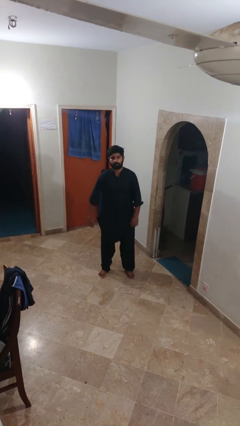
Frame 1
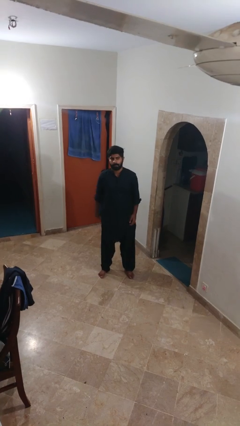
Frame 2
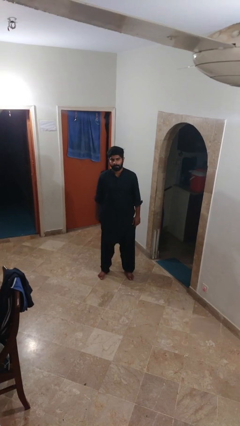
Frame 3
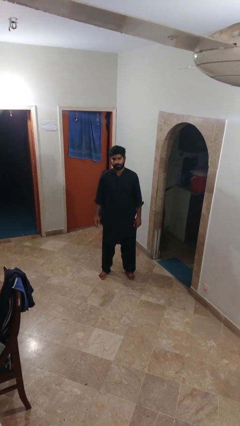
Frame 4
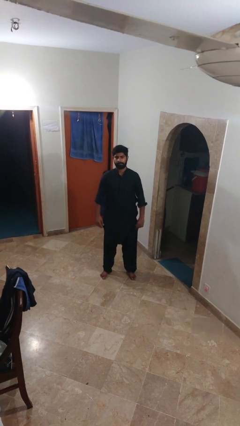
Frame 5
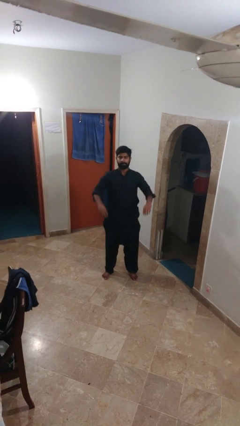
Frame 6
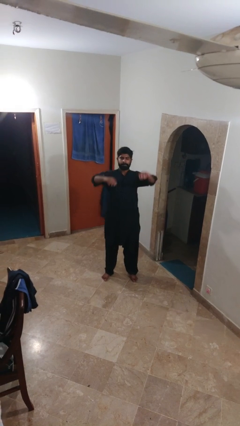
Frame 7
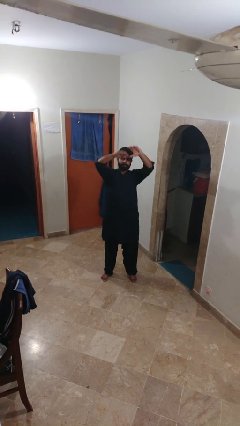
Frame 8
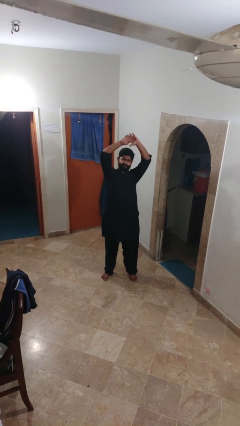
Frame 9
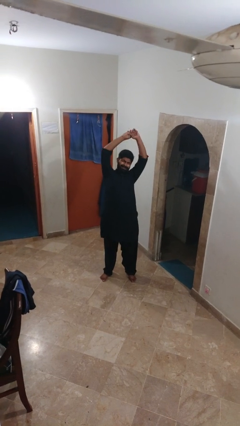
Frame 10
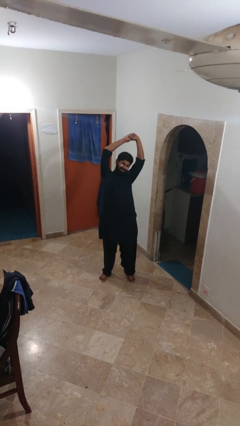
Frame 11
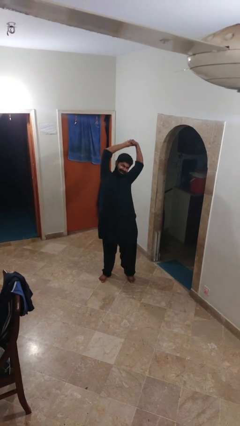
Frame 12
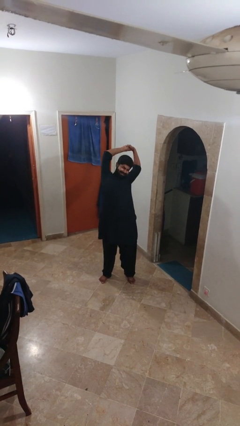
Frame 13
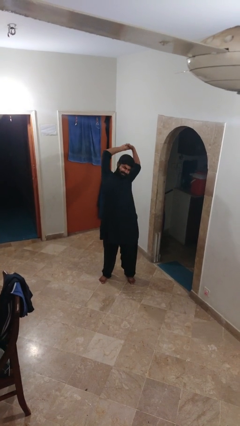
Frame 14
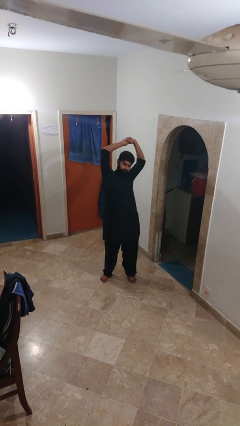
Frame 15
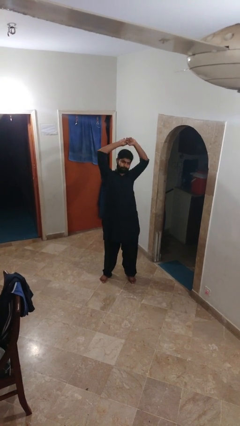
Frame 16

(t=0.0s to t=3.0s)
person stretches arms over head

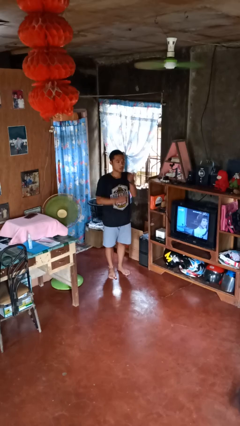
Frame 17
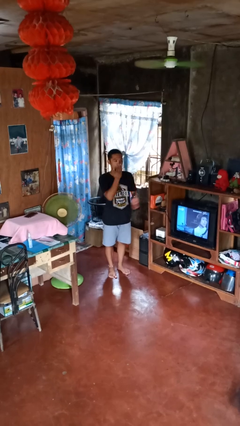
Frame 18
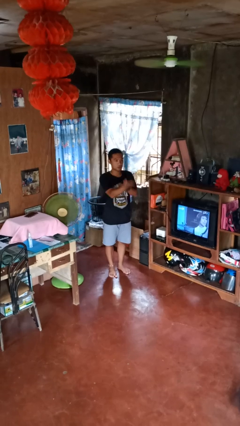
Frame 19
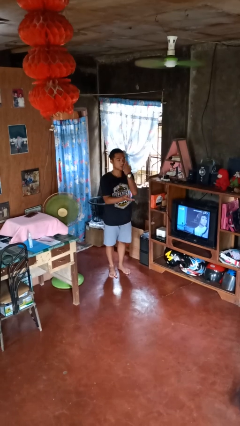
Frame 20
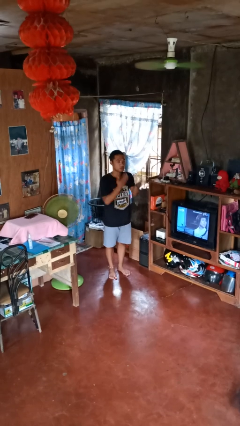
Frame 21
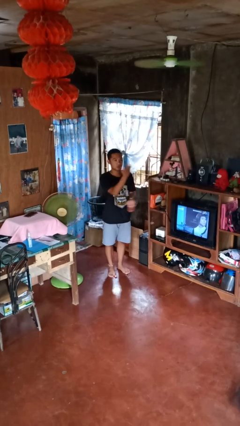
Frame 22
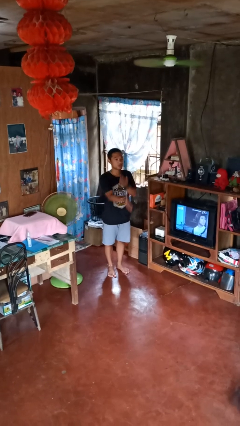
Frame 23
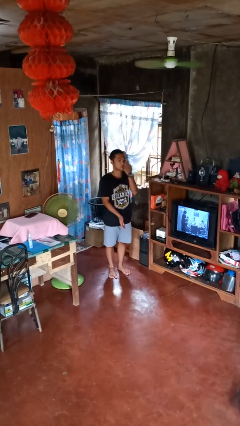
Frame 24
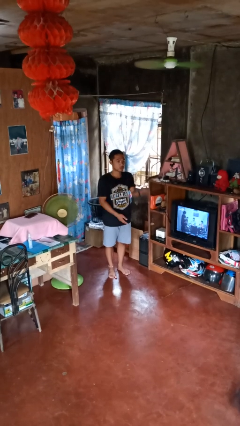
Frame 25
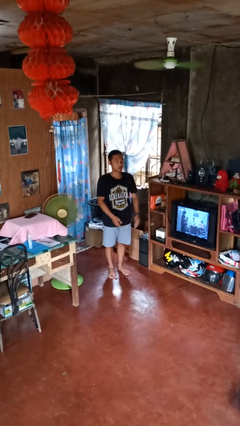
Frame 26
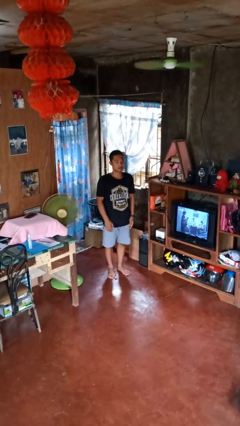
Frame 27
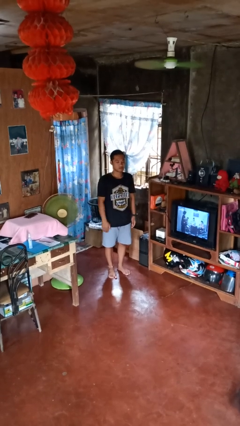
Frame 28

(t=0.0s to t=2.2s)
person gestures blow kiss

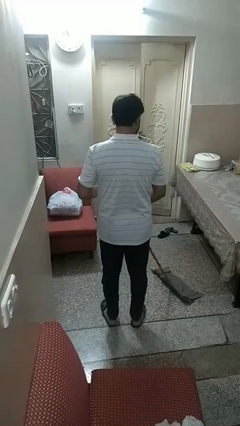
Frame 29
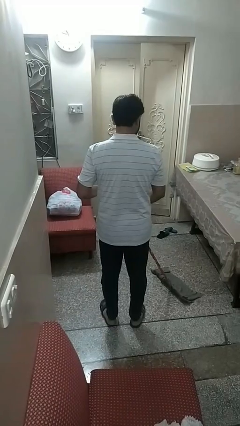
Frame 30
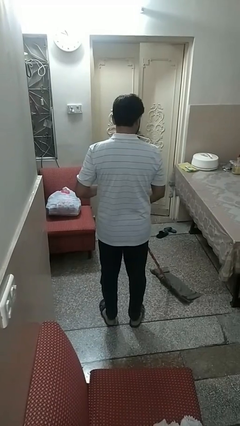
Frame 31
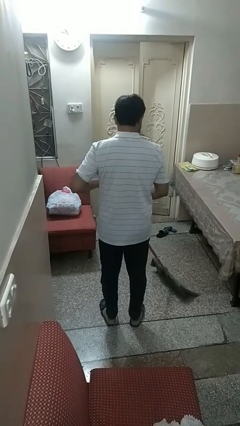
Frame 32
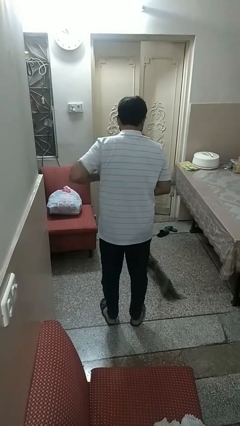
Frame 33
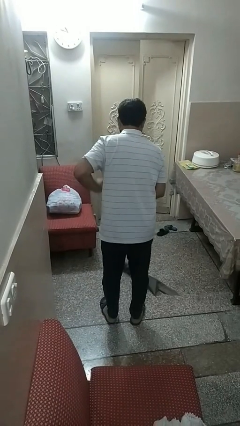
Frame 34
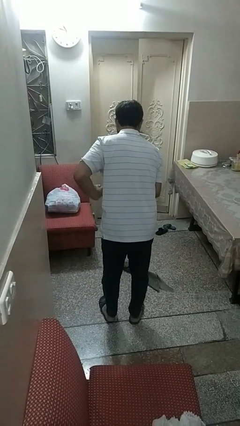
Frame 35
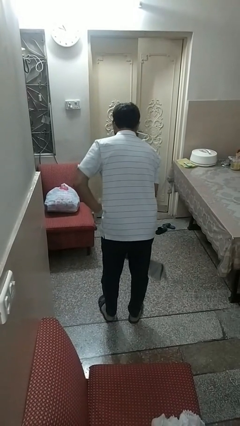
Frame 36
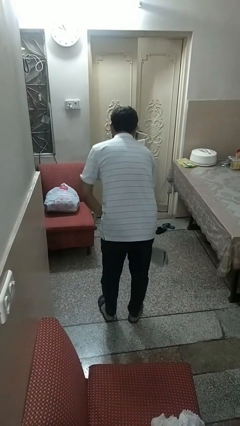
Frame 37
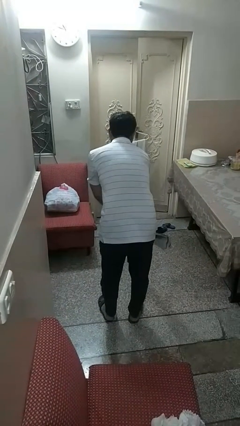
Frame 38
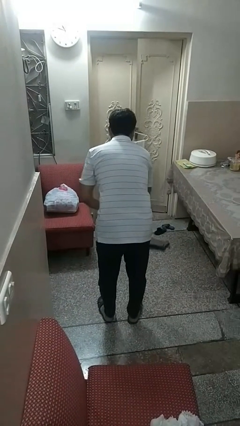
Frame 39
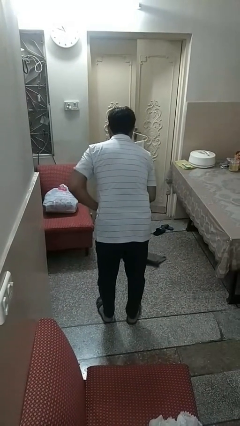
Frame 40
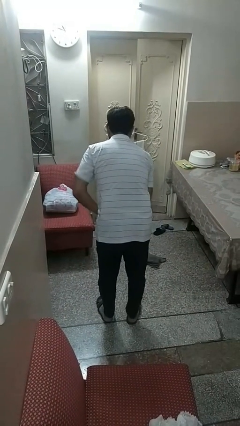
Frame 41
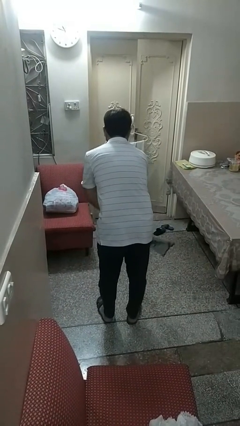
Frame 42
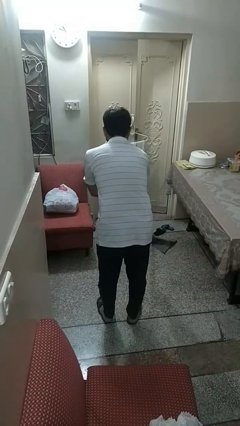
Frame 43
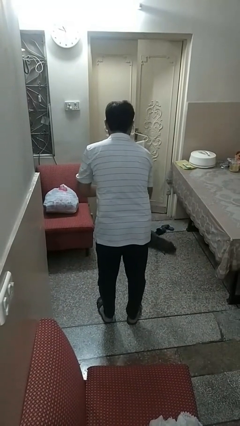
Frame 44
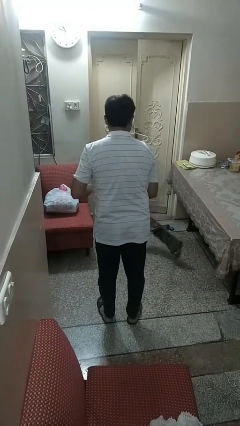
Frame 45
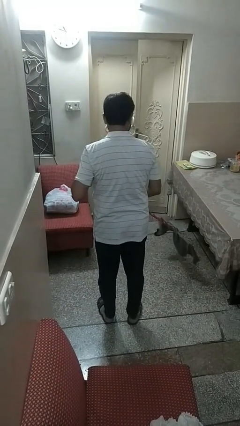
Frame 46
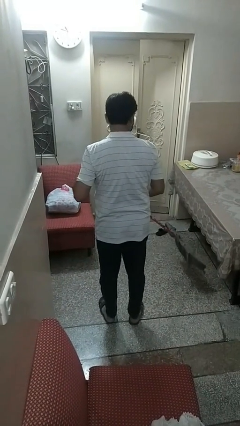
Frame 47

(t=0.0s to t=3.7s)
person mops

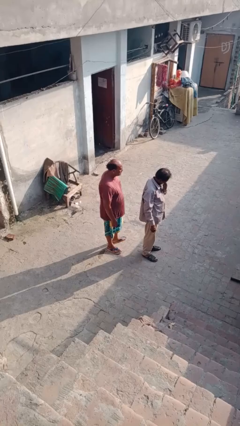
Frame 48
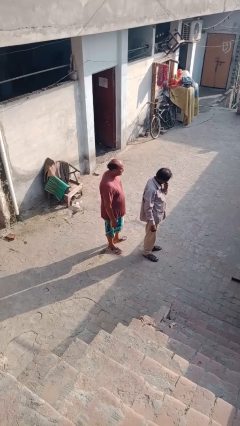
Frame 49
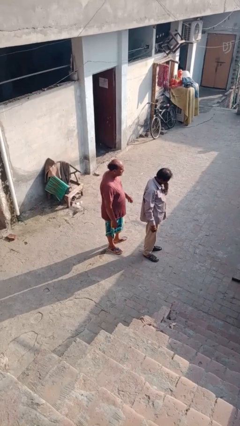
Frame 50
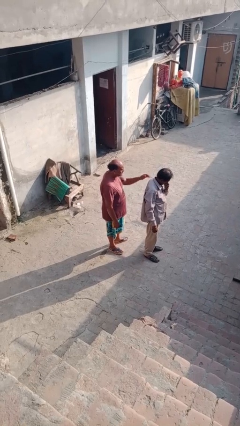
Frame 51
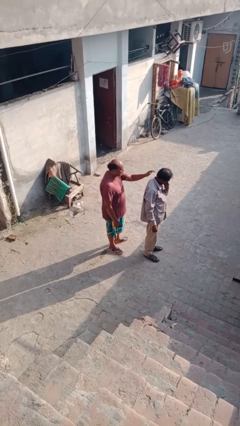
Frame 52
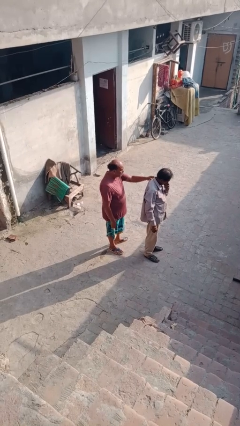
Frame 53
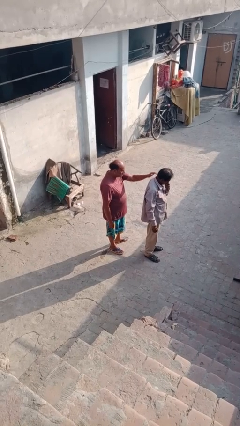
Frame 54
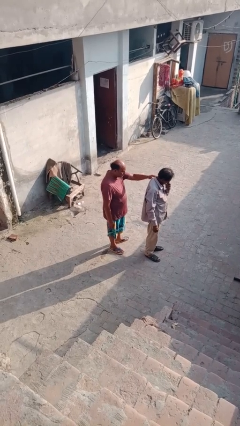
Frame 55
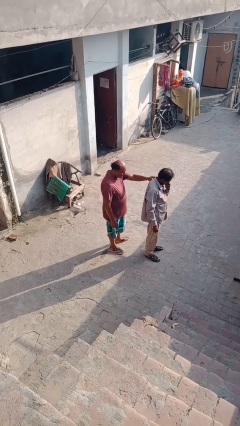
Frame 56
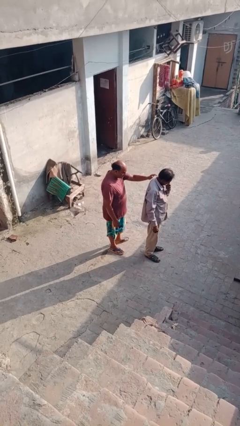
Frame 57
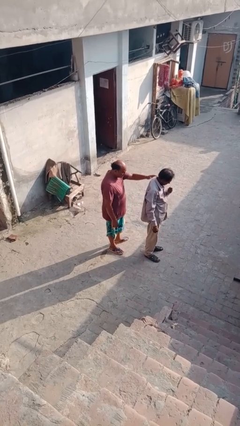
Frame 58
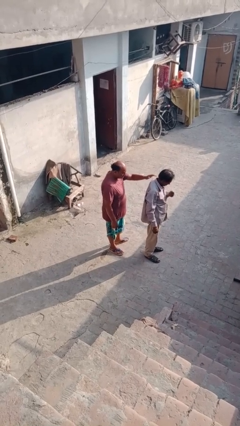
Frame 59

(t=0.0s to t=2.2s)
person touches back of person

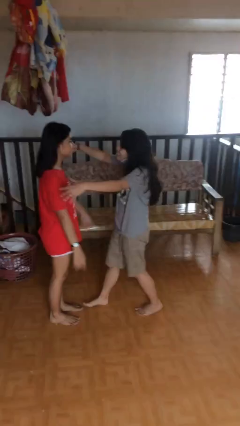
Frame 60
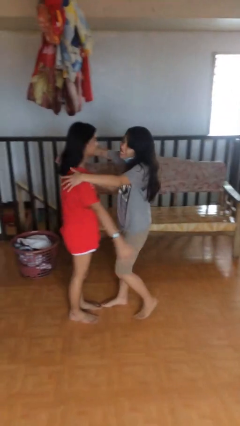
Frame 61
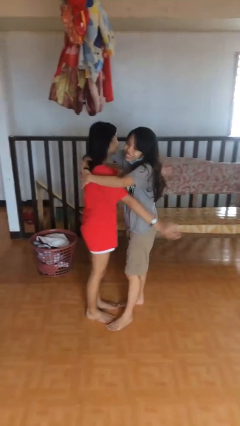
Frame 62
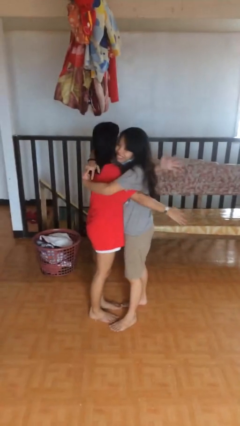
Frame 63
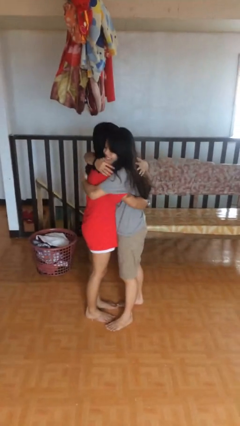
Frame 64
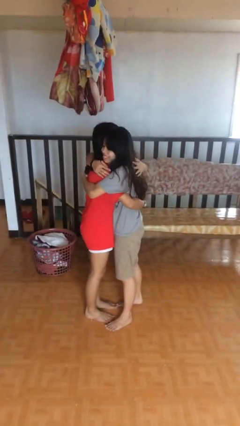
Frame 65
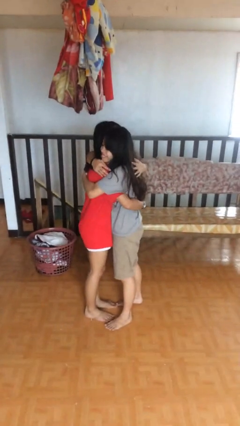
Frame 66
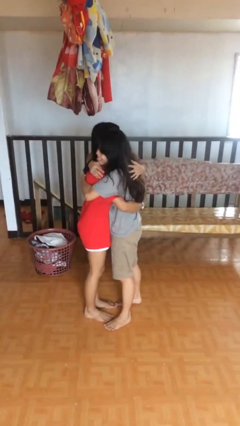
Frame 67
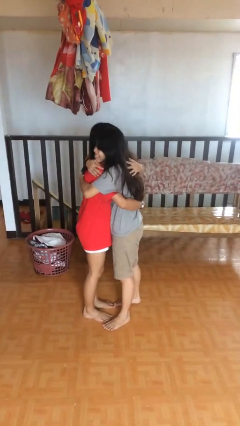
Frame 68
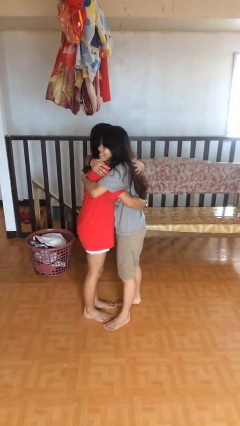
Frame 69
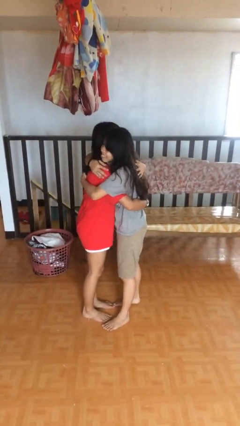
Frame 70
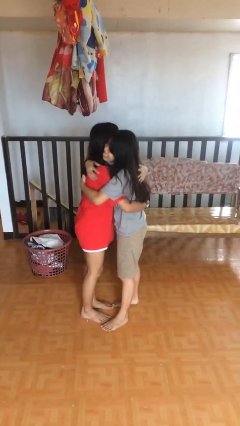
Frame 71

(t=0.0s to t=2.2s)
person embraces person

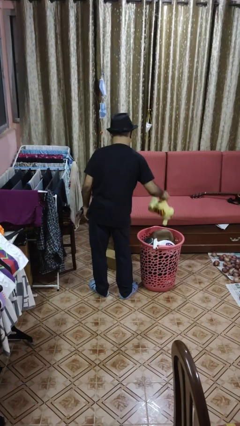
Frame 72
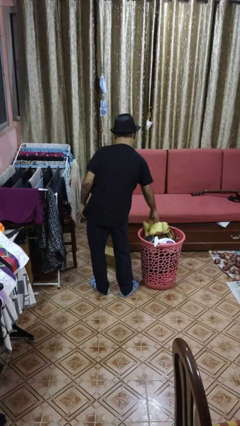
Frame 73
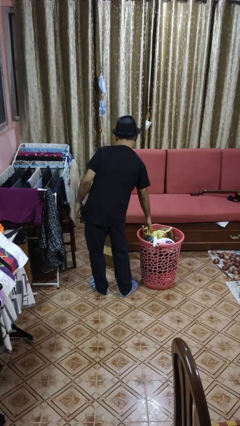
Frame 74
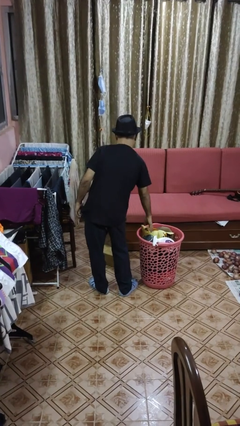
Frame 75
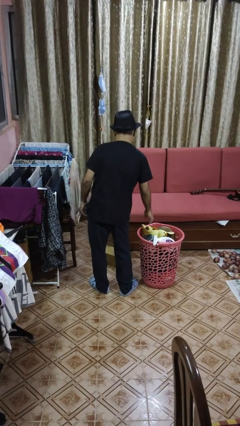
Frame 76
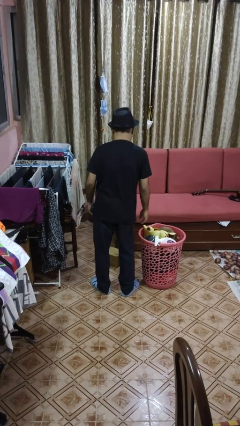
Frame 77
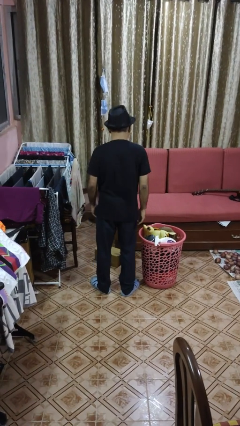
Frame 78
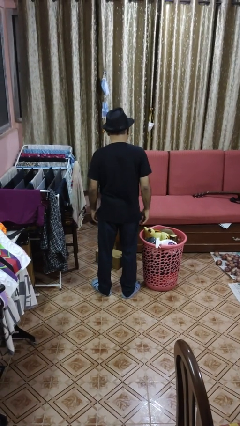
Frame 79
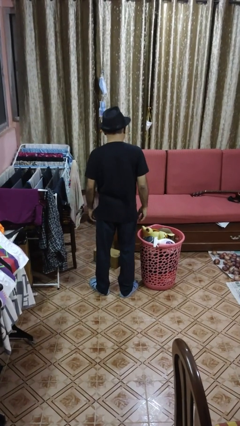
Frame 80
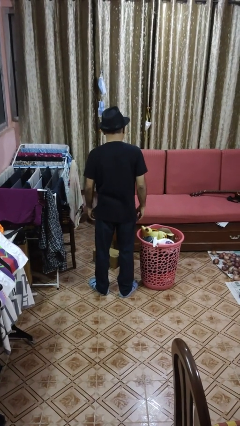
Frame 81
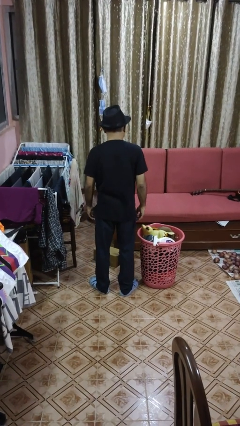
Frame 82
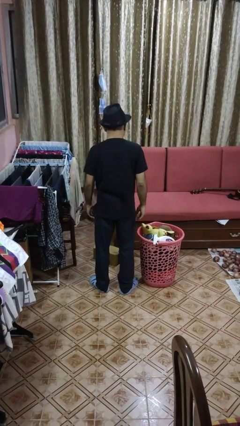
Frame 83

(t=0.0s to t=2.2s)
person puts object into basket

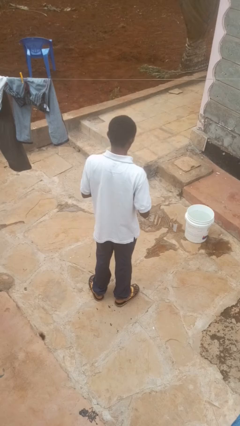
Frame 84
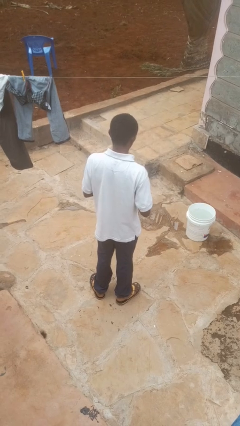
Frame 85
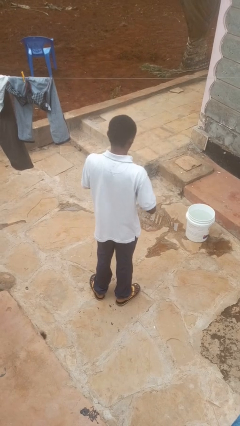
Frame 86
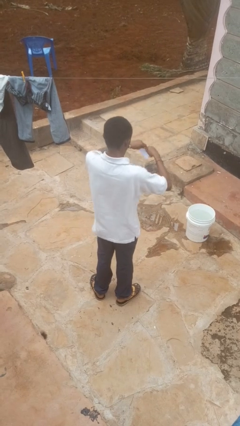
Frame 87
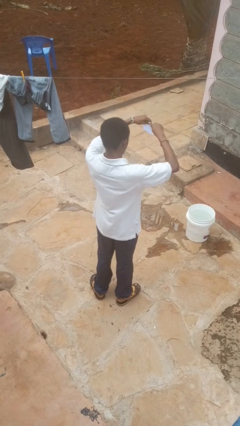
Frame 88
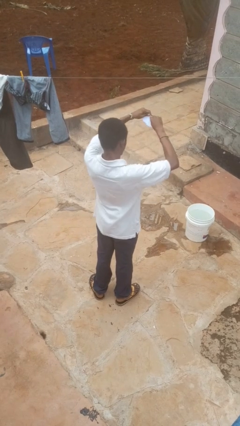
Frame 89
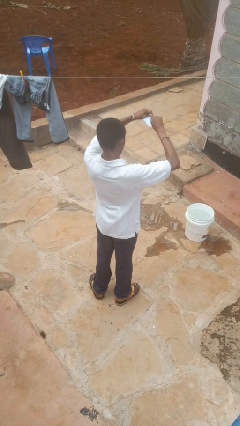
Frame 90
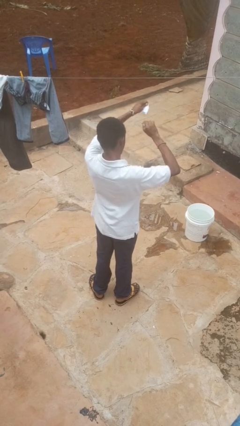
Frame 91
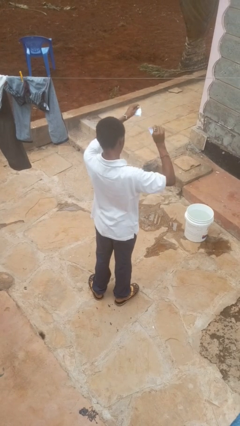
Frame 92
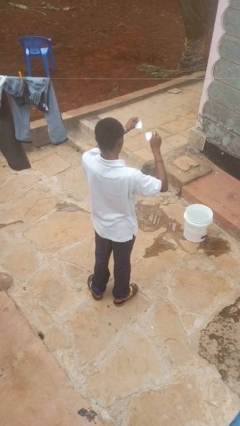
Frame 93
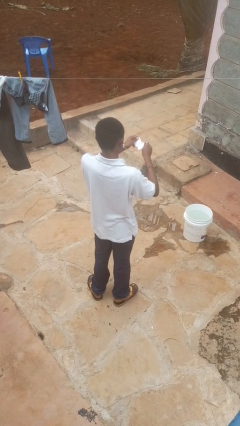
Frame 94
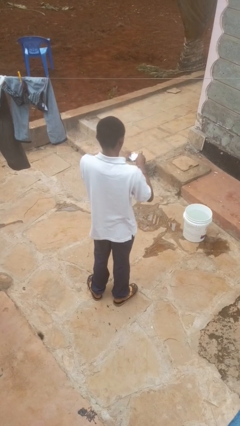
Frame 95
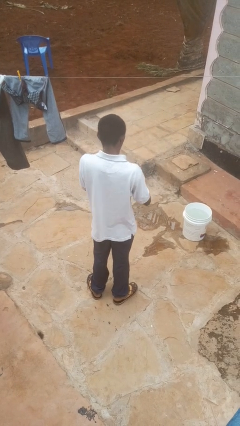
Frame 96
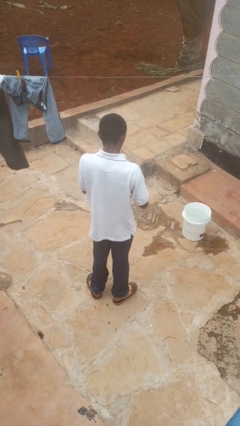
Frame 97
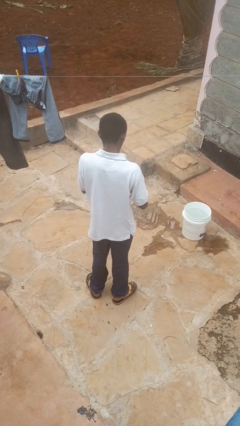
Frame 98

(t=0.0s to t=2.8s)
person tears paper
